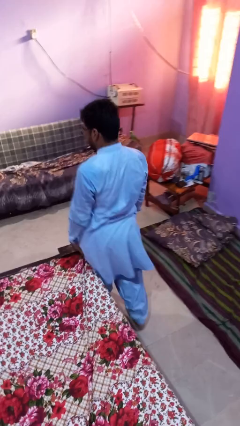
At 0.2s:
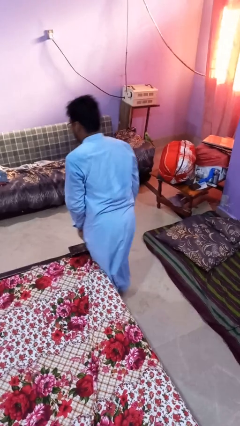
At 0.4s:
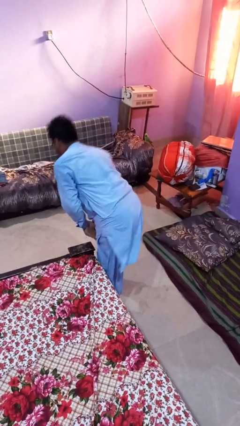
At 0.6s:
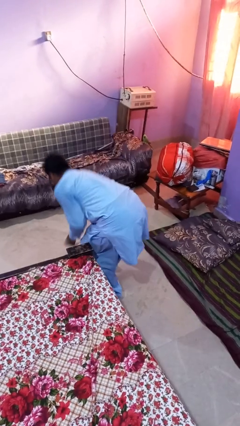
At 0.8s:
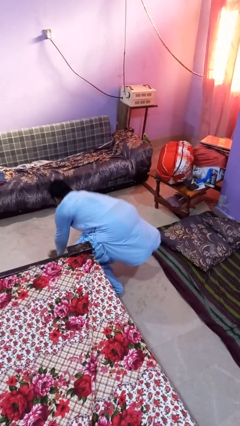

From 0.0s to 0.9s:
person trips on object on floor

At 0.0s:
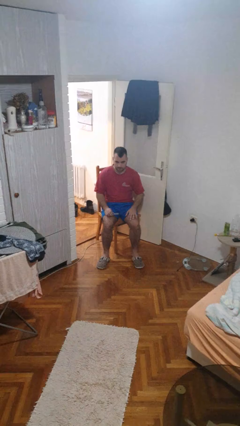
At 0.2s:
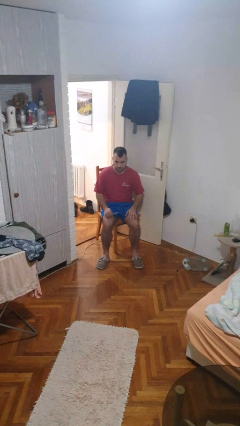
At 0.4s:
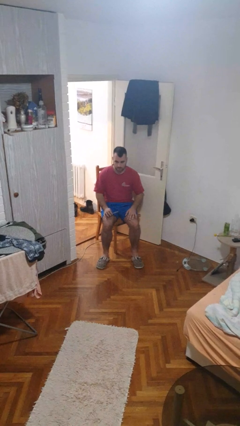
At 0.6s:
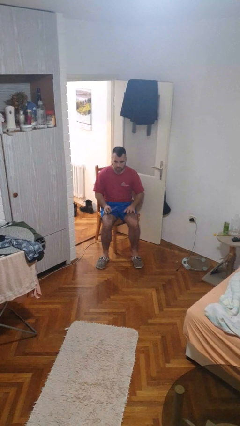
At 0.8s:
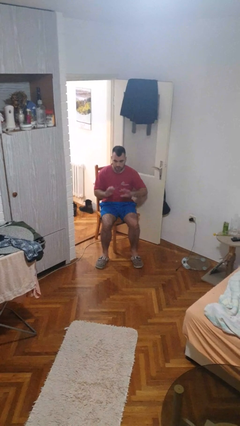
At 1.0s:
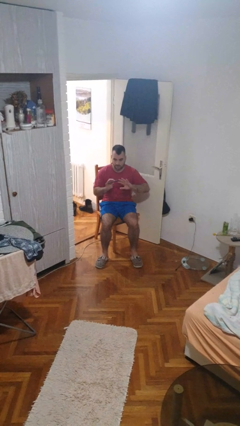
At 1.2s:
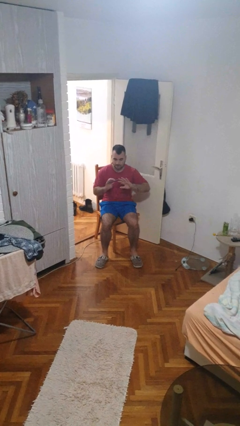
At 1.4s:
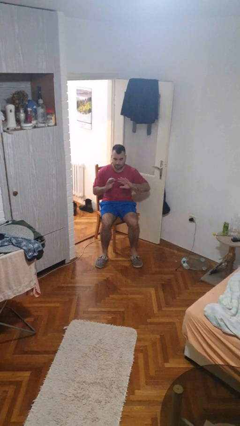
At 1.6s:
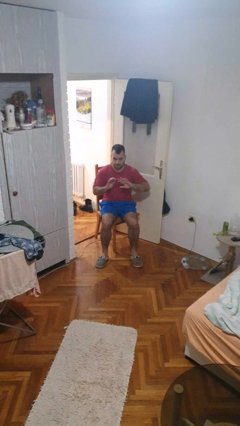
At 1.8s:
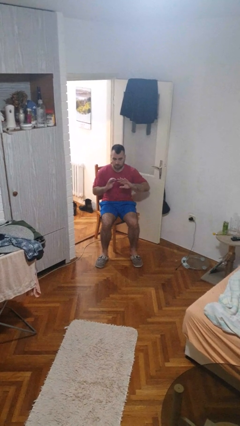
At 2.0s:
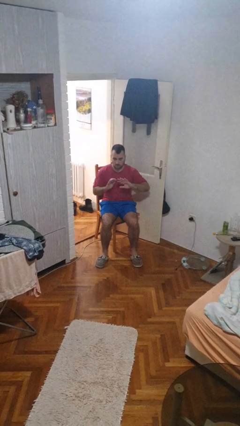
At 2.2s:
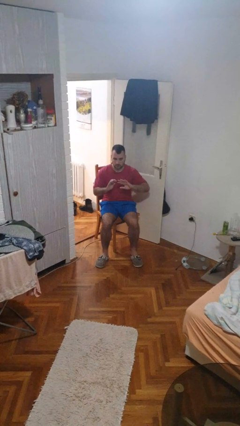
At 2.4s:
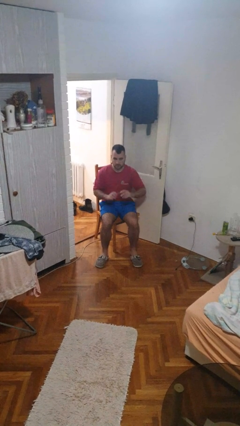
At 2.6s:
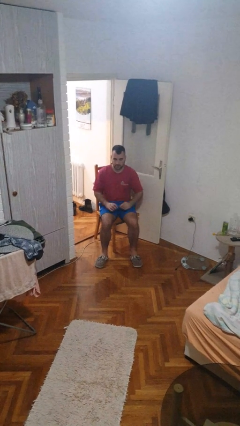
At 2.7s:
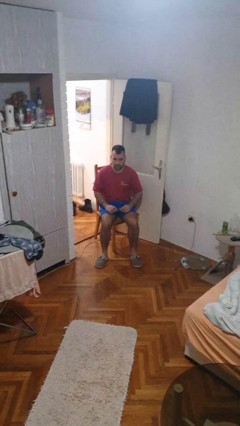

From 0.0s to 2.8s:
person files fingernails

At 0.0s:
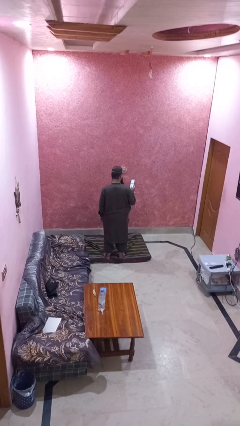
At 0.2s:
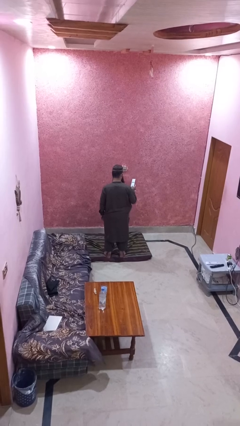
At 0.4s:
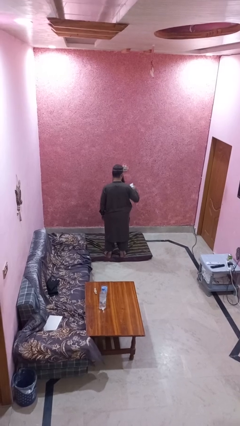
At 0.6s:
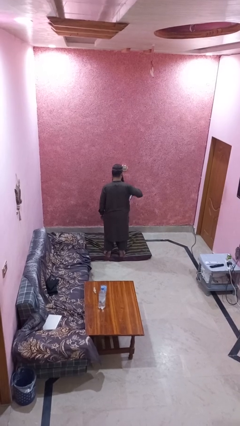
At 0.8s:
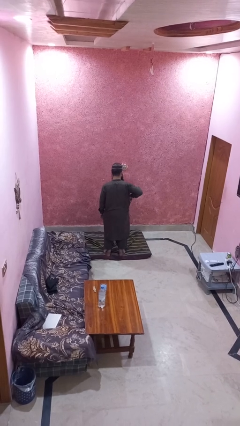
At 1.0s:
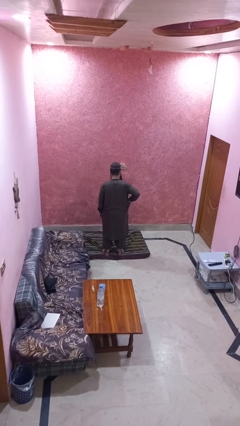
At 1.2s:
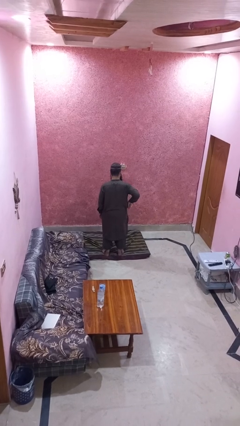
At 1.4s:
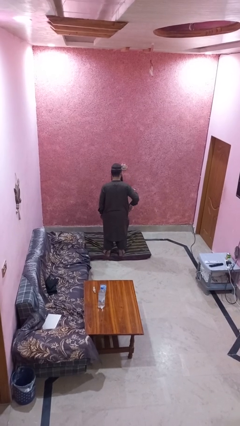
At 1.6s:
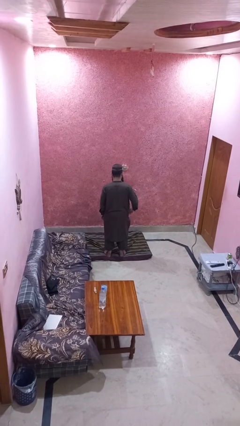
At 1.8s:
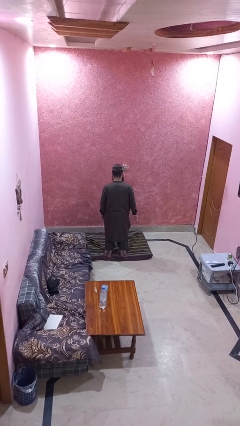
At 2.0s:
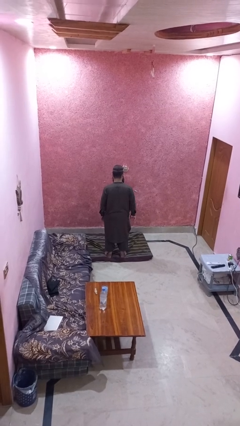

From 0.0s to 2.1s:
person puts phone into pocket

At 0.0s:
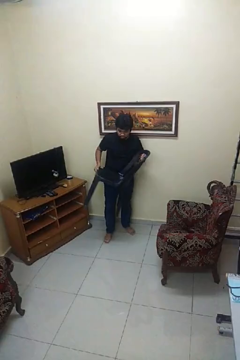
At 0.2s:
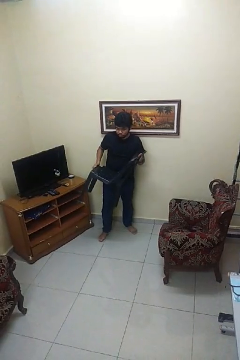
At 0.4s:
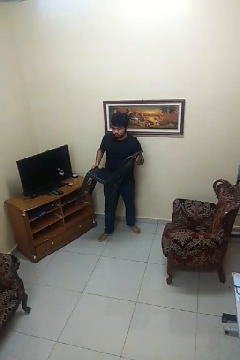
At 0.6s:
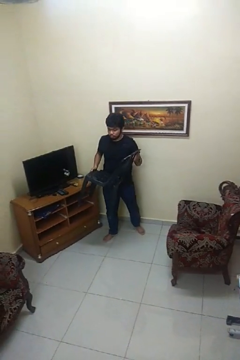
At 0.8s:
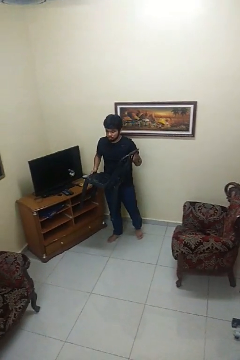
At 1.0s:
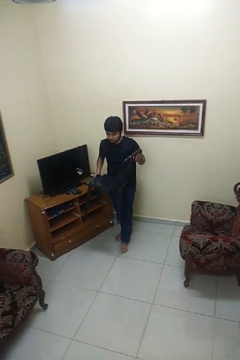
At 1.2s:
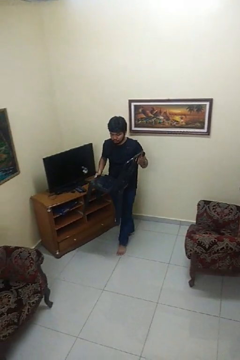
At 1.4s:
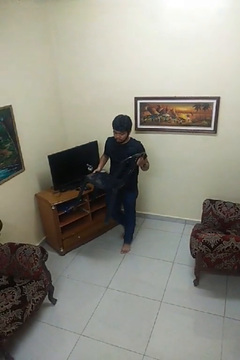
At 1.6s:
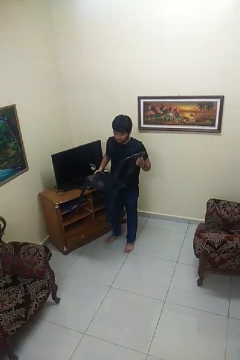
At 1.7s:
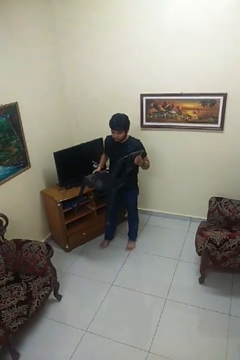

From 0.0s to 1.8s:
person carries furniture

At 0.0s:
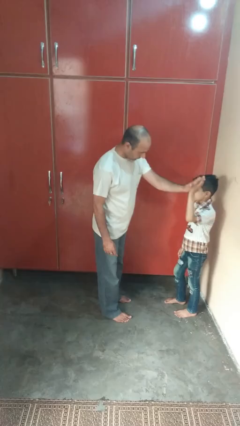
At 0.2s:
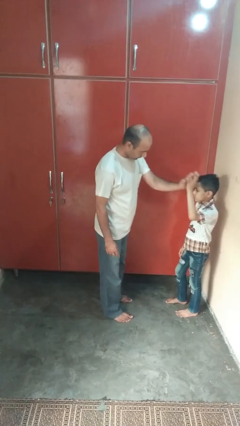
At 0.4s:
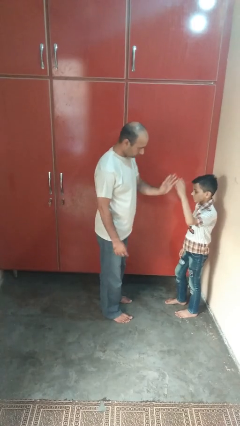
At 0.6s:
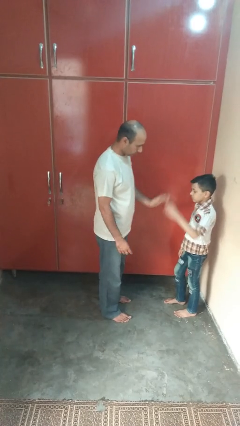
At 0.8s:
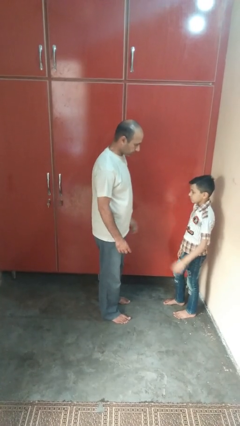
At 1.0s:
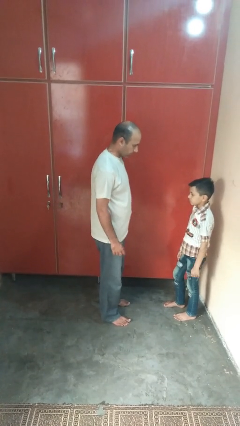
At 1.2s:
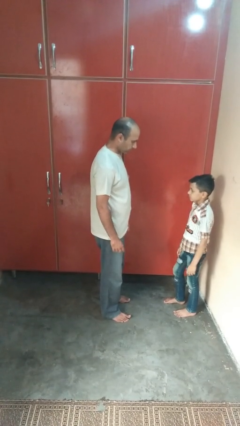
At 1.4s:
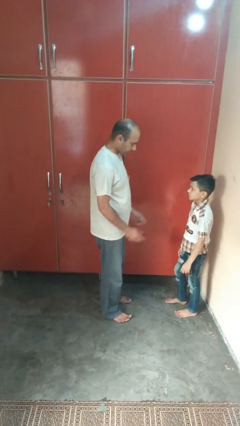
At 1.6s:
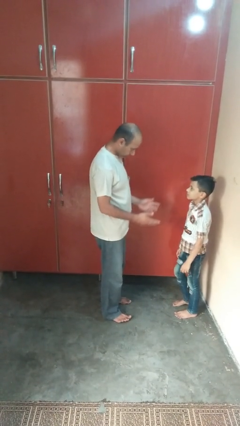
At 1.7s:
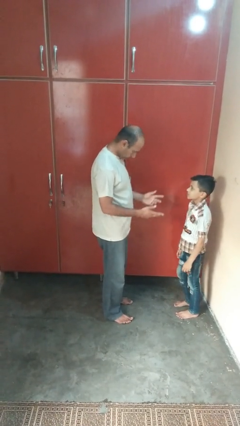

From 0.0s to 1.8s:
person highfives hand

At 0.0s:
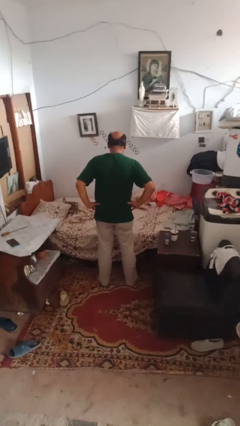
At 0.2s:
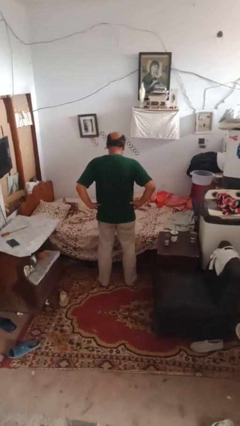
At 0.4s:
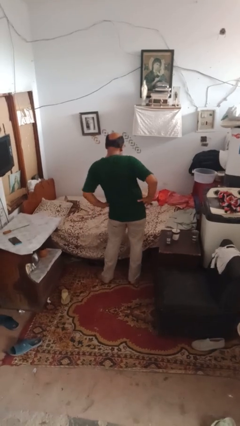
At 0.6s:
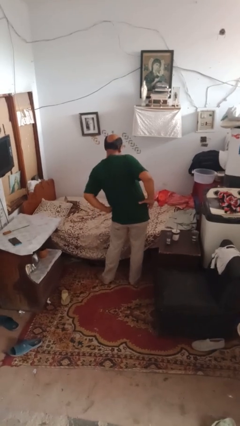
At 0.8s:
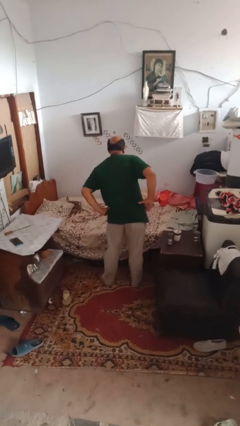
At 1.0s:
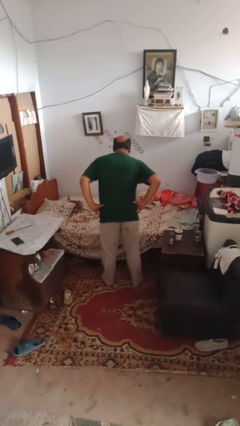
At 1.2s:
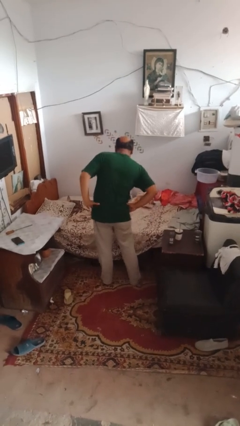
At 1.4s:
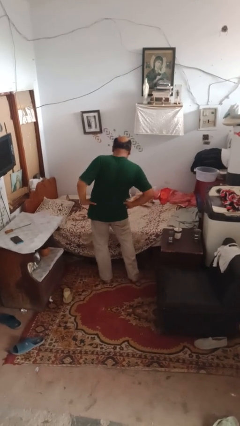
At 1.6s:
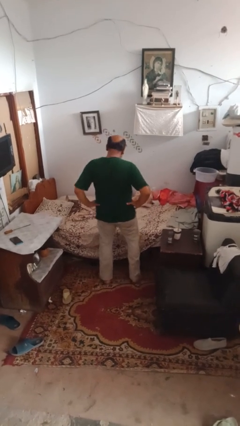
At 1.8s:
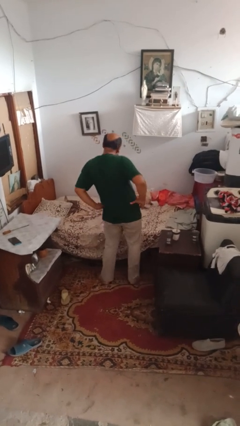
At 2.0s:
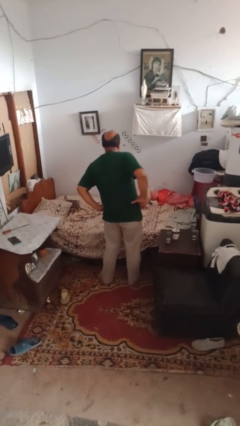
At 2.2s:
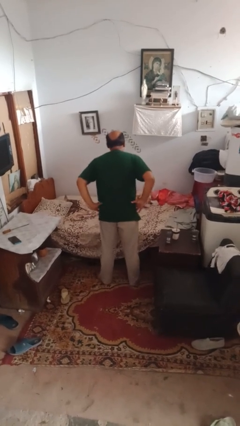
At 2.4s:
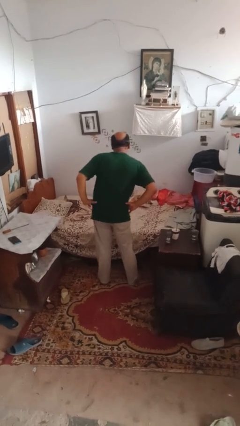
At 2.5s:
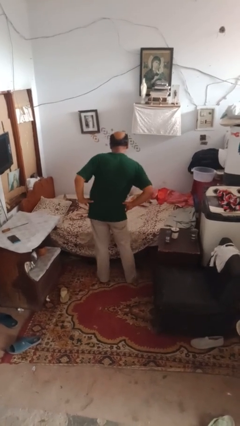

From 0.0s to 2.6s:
person wiggles hips

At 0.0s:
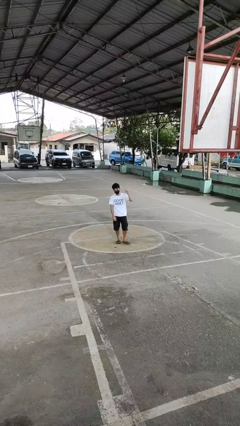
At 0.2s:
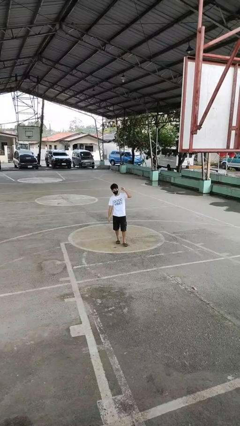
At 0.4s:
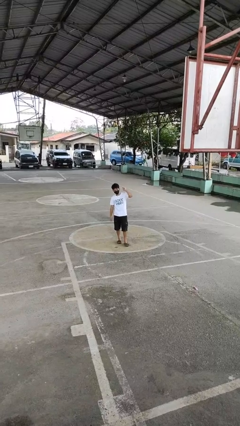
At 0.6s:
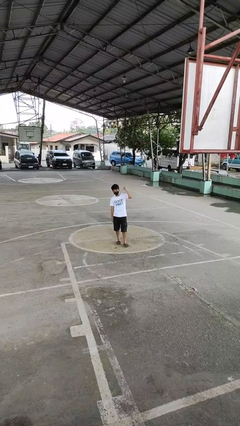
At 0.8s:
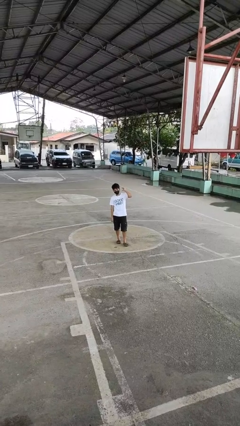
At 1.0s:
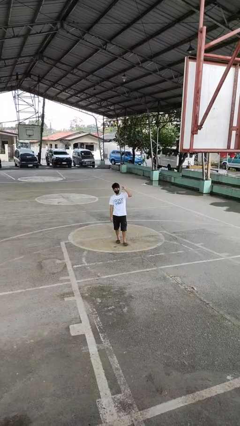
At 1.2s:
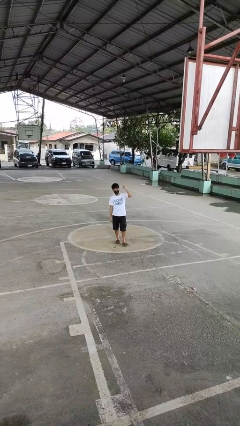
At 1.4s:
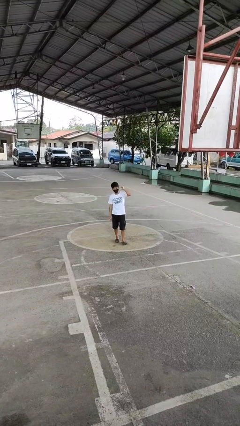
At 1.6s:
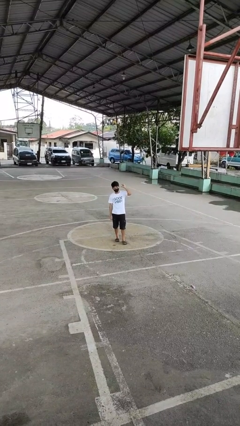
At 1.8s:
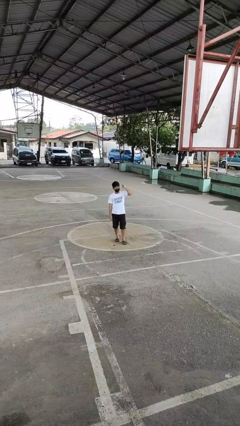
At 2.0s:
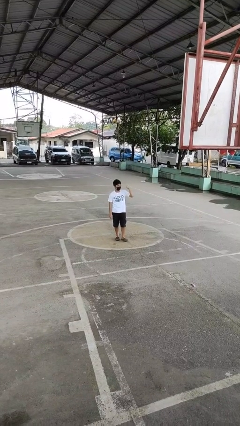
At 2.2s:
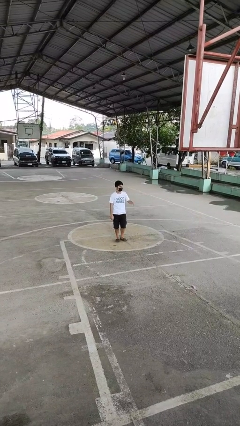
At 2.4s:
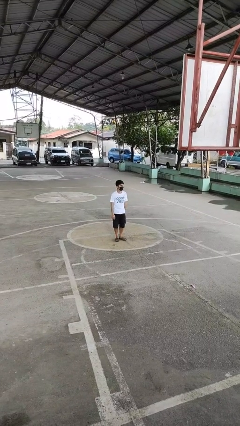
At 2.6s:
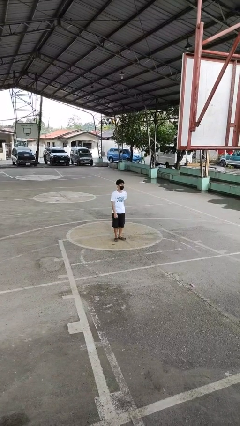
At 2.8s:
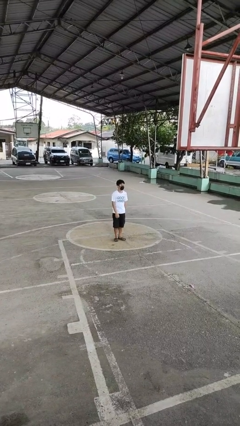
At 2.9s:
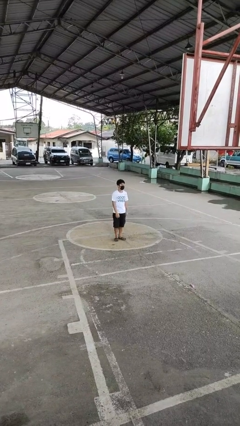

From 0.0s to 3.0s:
person gestures behind me

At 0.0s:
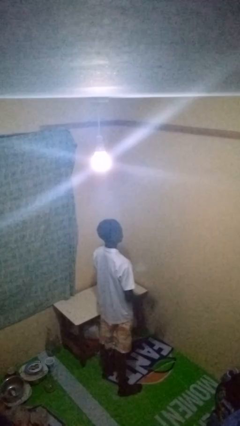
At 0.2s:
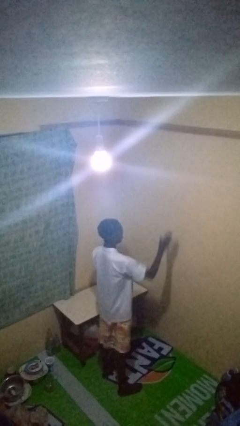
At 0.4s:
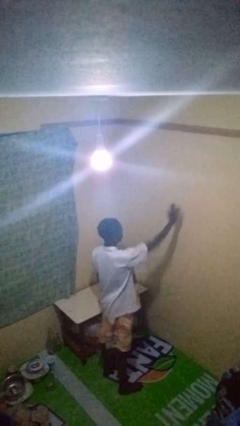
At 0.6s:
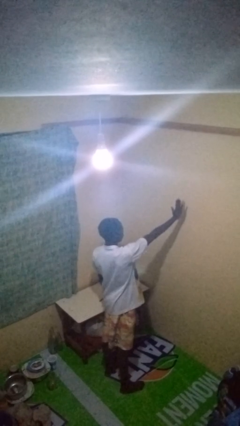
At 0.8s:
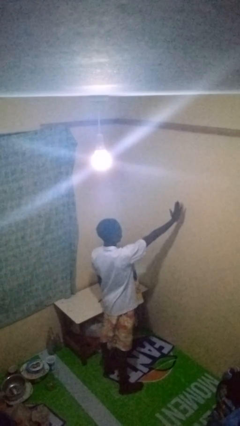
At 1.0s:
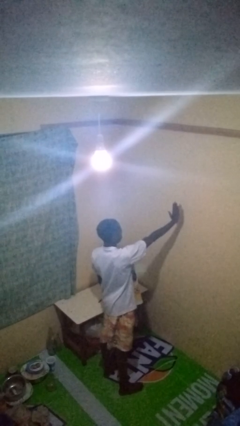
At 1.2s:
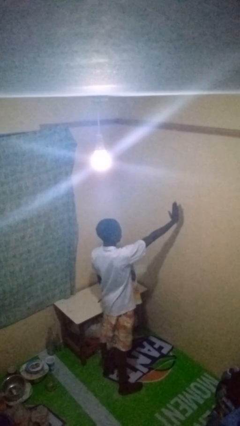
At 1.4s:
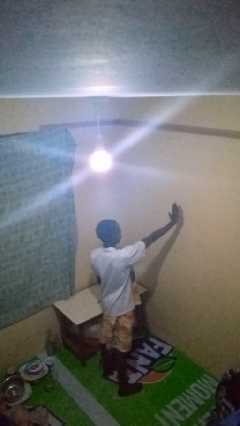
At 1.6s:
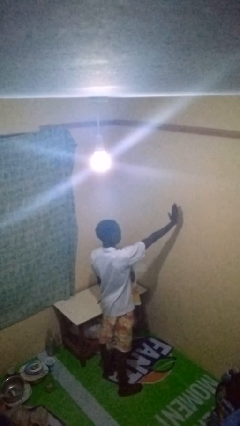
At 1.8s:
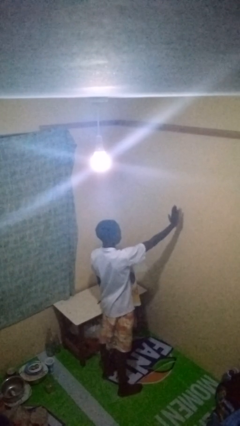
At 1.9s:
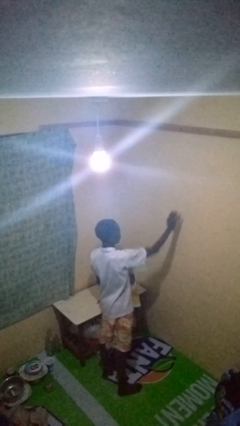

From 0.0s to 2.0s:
person gestures stop

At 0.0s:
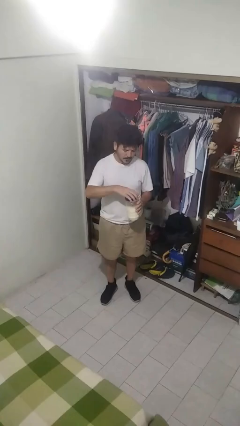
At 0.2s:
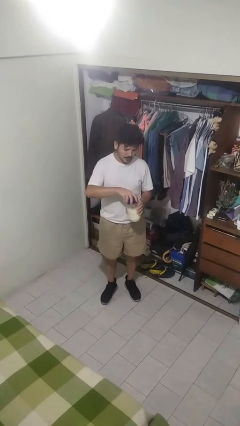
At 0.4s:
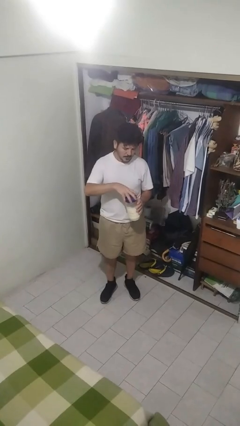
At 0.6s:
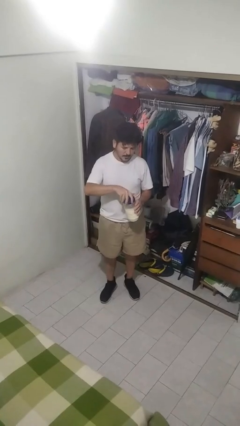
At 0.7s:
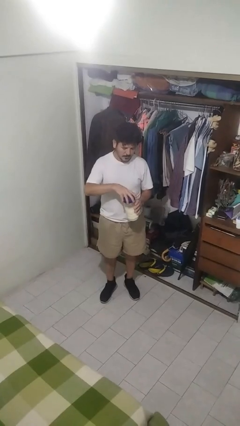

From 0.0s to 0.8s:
person closes jar
